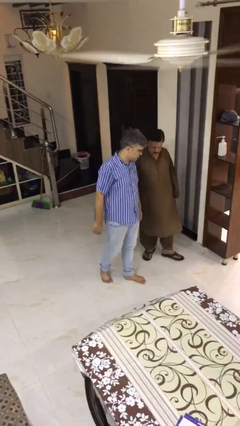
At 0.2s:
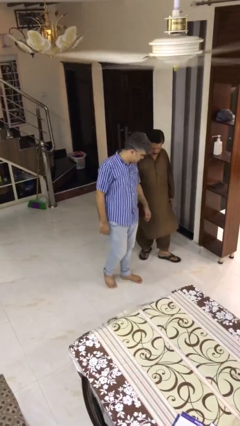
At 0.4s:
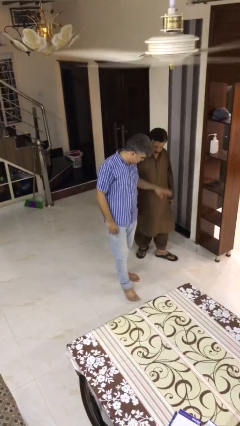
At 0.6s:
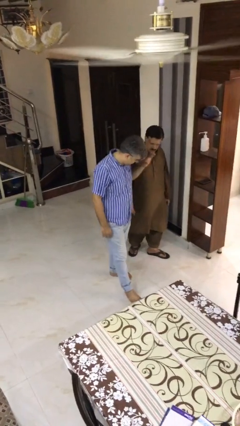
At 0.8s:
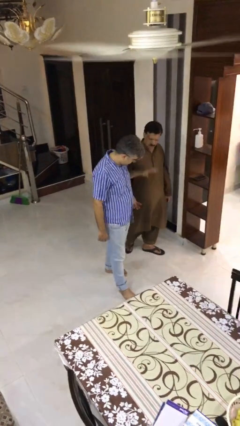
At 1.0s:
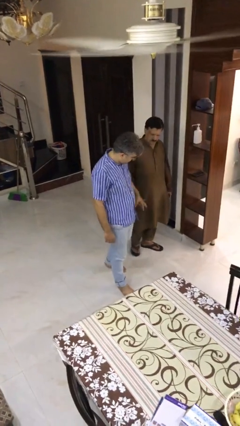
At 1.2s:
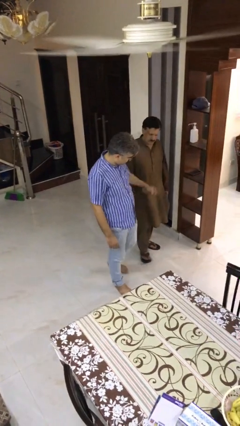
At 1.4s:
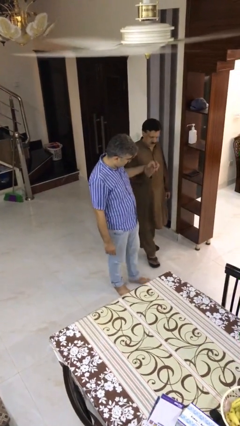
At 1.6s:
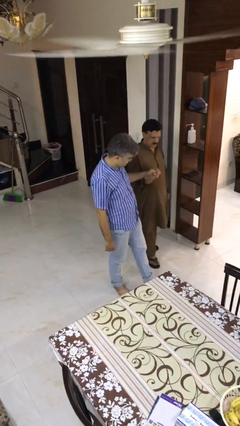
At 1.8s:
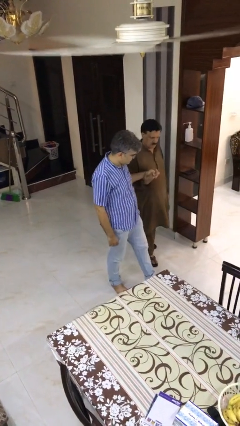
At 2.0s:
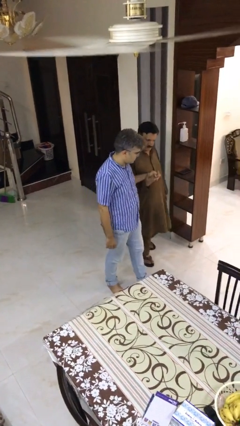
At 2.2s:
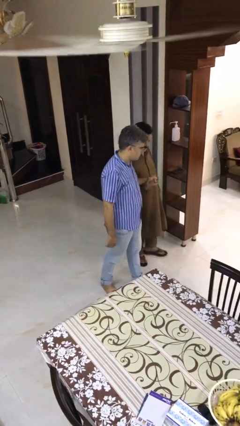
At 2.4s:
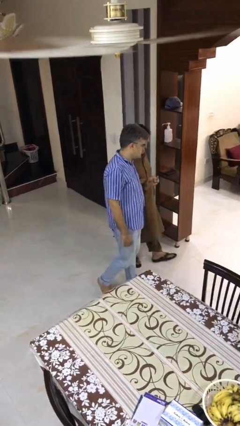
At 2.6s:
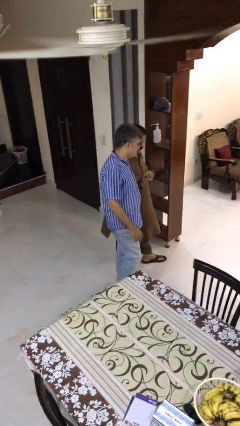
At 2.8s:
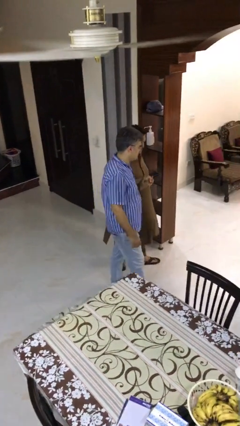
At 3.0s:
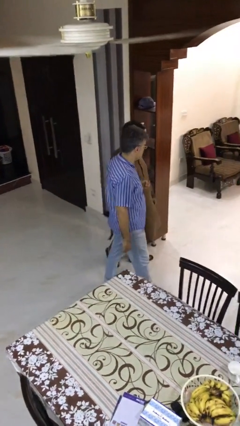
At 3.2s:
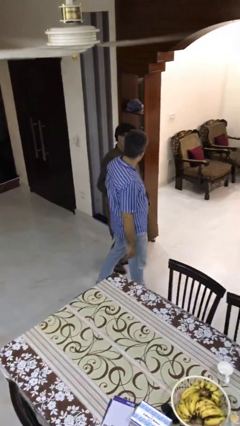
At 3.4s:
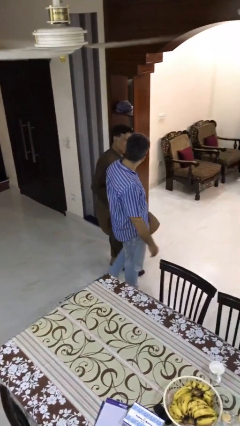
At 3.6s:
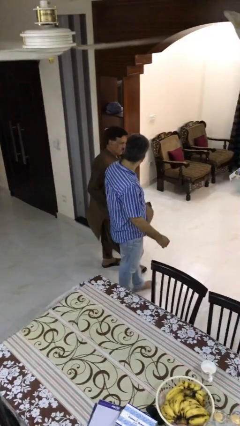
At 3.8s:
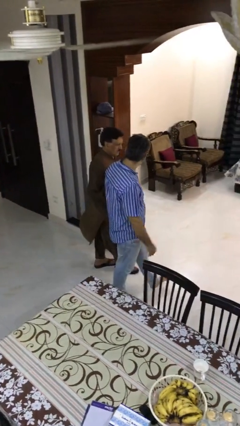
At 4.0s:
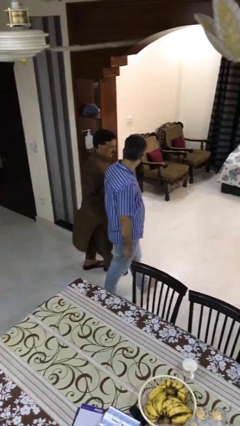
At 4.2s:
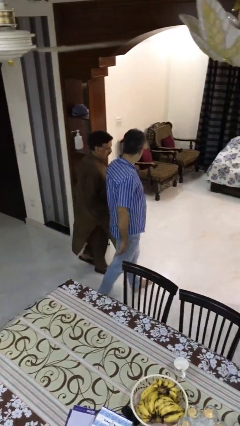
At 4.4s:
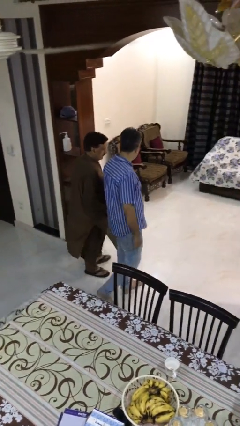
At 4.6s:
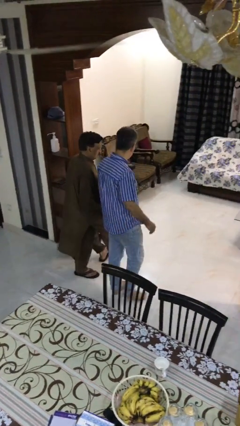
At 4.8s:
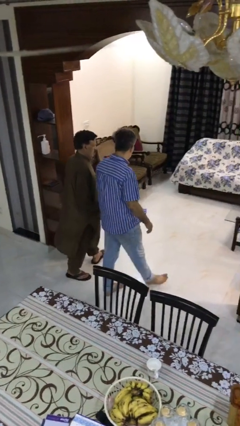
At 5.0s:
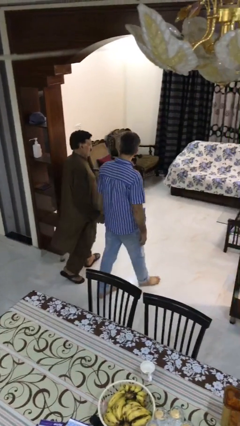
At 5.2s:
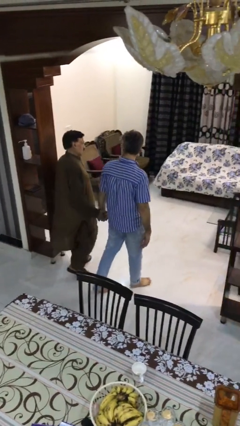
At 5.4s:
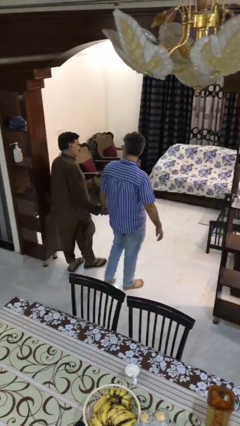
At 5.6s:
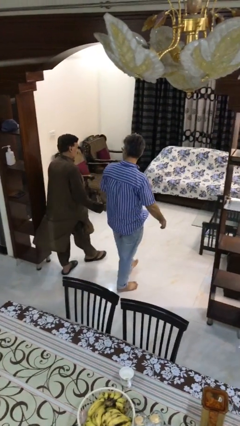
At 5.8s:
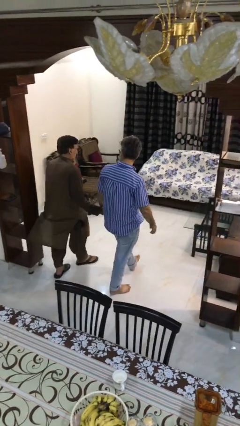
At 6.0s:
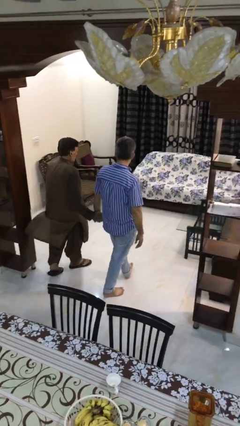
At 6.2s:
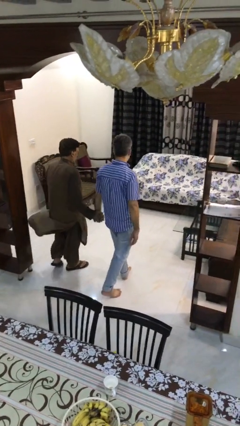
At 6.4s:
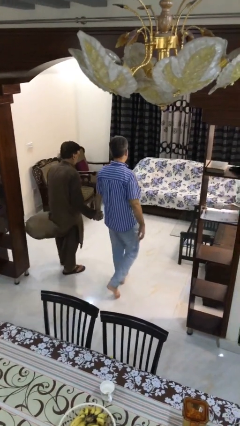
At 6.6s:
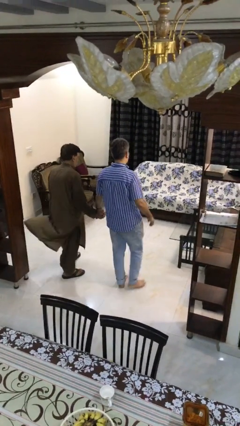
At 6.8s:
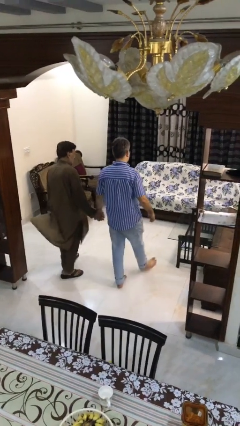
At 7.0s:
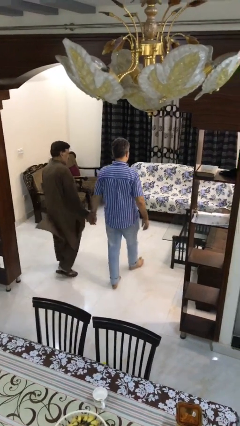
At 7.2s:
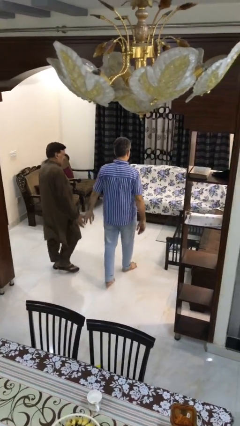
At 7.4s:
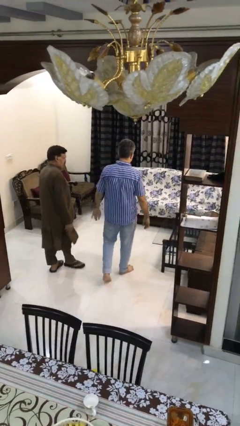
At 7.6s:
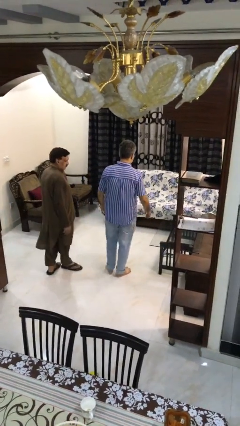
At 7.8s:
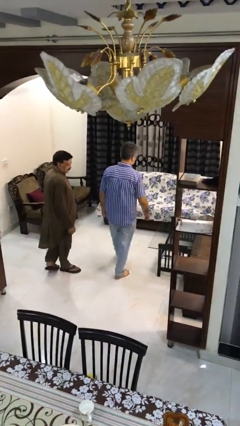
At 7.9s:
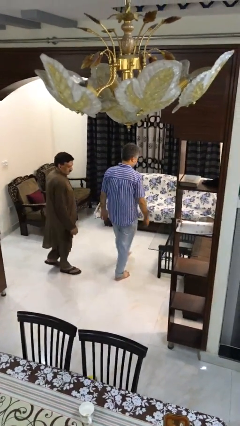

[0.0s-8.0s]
person holds hand

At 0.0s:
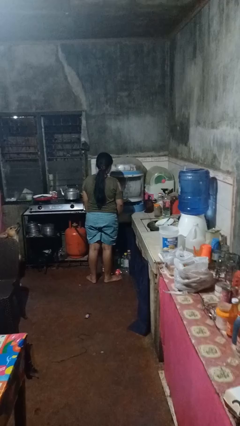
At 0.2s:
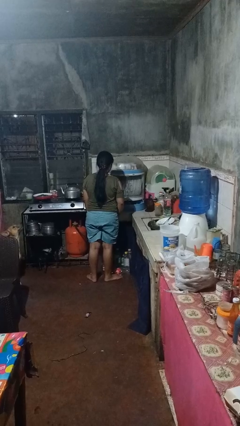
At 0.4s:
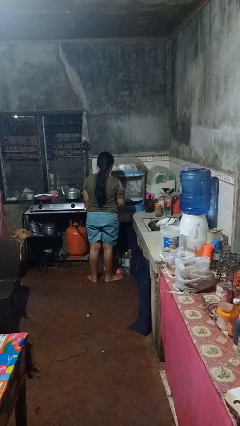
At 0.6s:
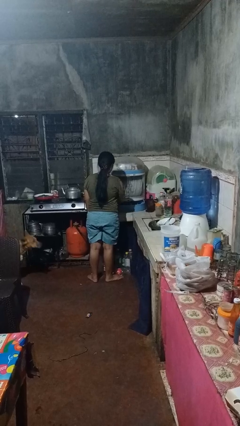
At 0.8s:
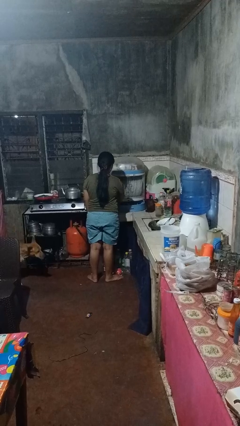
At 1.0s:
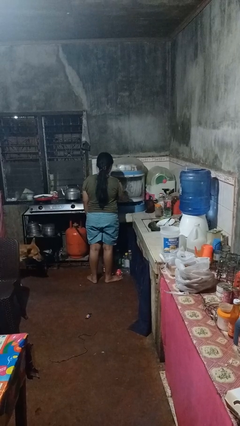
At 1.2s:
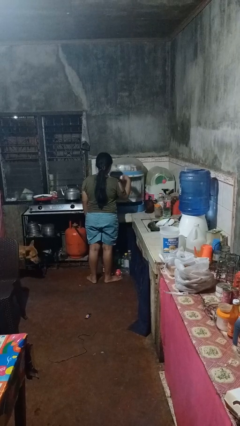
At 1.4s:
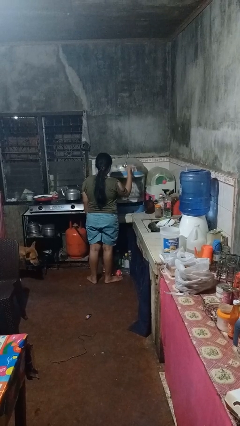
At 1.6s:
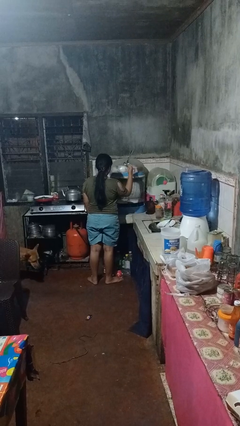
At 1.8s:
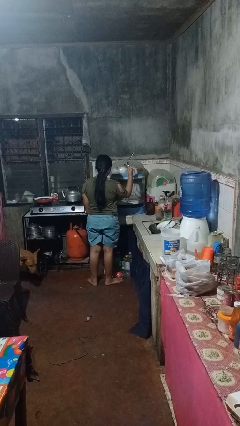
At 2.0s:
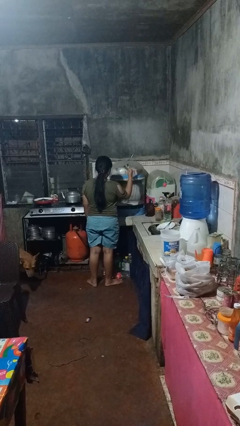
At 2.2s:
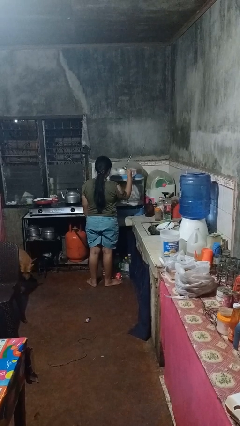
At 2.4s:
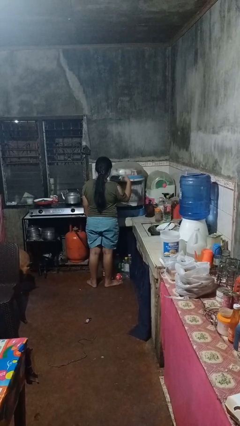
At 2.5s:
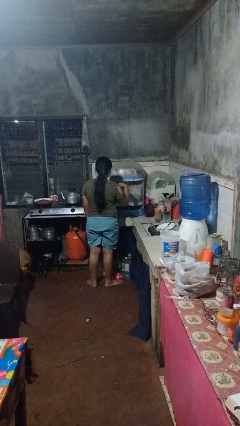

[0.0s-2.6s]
person takes object from kitchen drawer

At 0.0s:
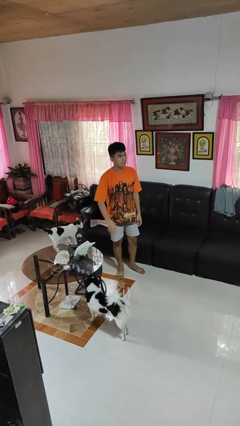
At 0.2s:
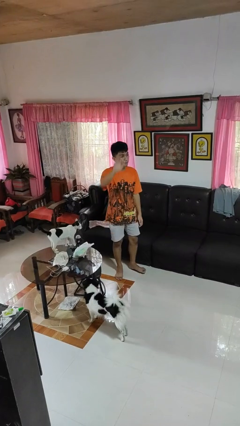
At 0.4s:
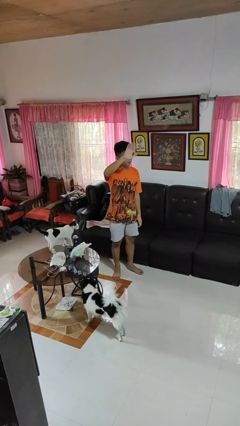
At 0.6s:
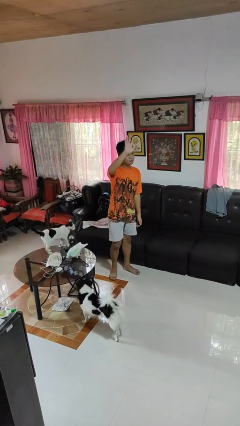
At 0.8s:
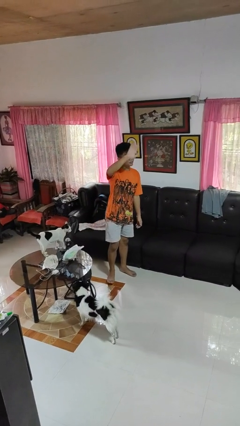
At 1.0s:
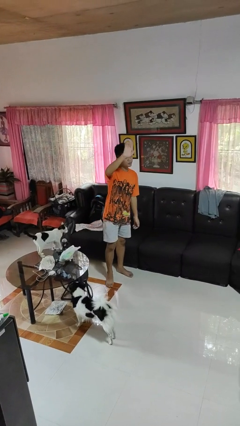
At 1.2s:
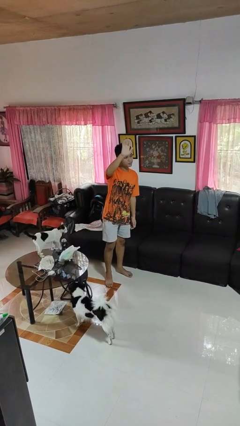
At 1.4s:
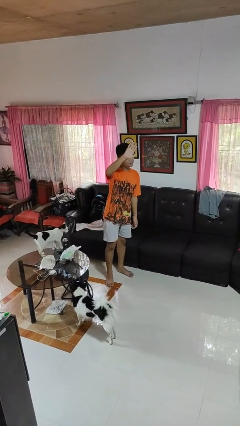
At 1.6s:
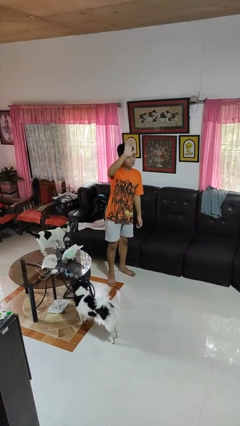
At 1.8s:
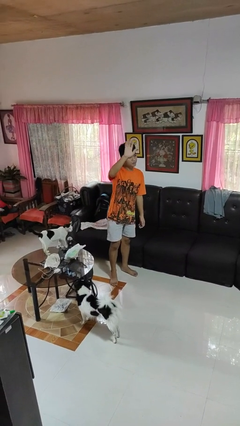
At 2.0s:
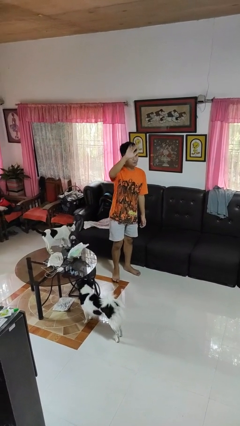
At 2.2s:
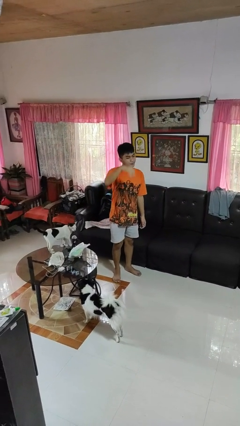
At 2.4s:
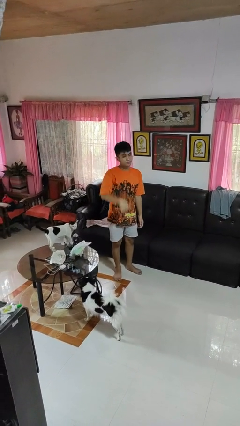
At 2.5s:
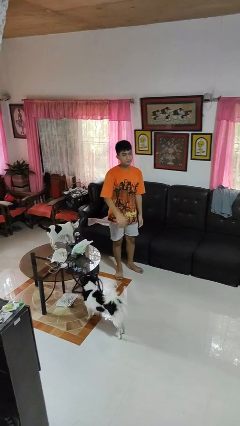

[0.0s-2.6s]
person waves at person

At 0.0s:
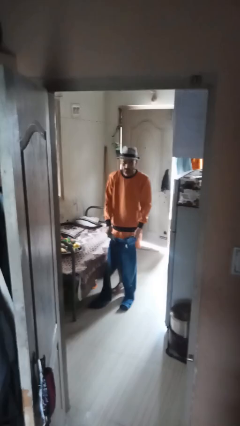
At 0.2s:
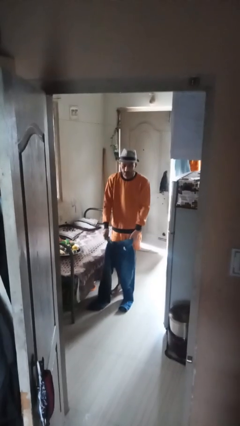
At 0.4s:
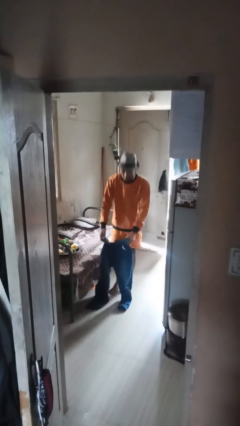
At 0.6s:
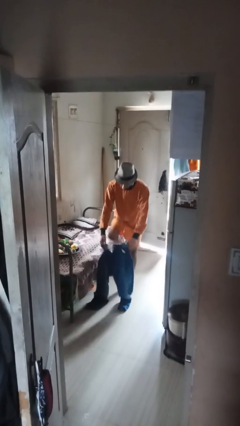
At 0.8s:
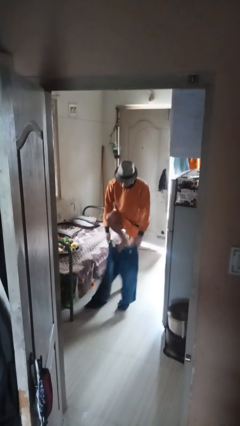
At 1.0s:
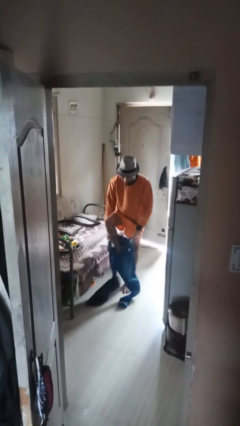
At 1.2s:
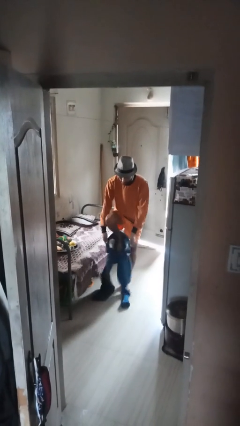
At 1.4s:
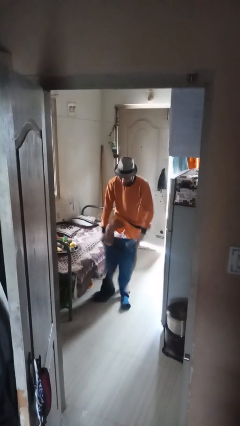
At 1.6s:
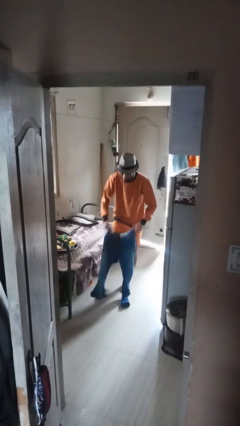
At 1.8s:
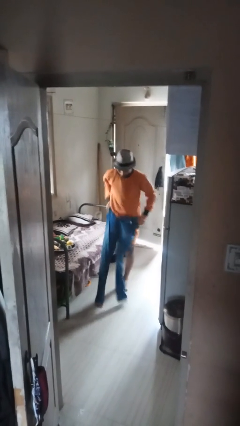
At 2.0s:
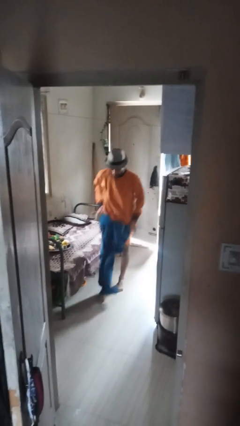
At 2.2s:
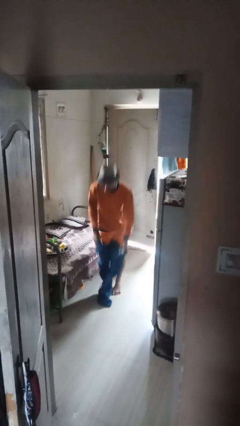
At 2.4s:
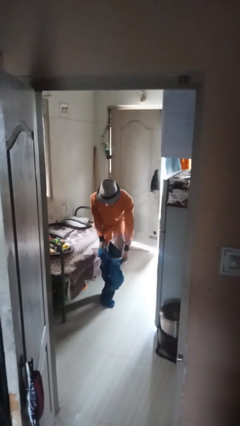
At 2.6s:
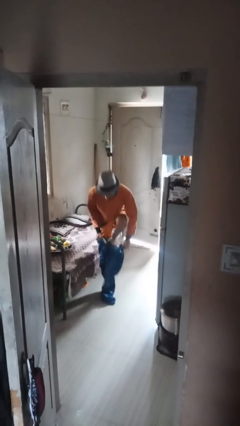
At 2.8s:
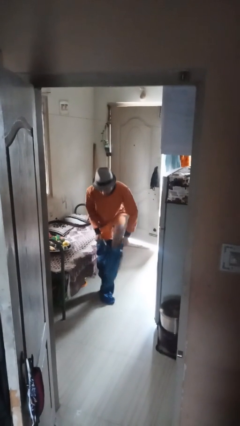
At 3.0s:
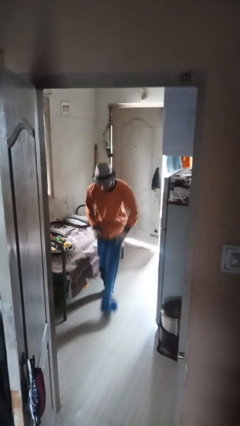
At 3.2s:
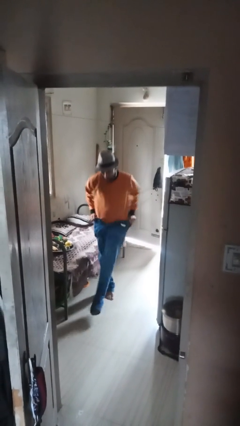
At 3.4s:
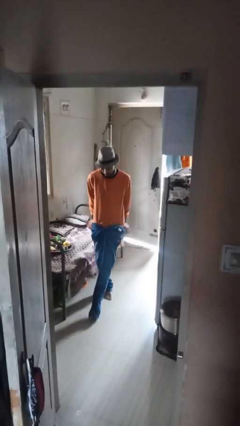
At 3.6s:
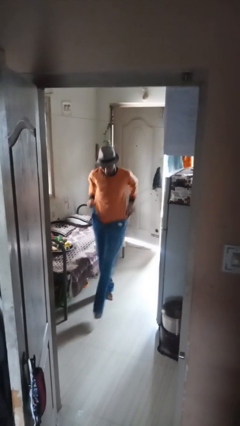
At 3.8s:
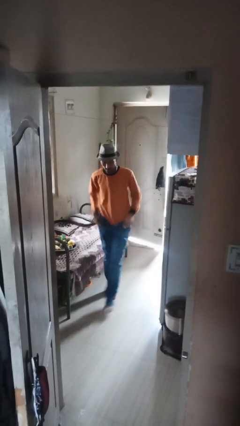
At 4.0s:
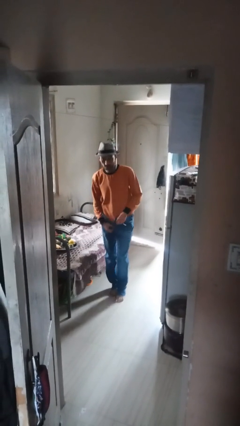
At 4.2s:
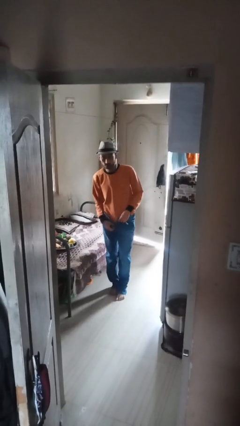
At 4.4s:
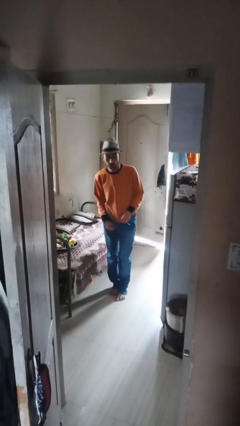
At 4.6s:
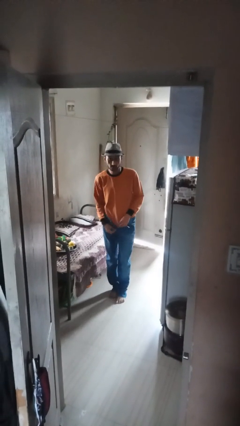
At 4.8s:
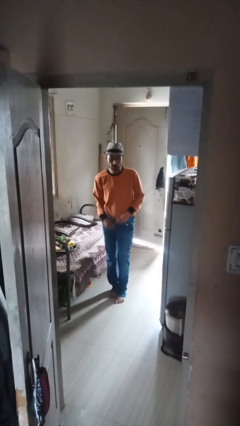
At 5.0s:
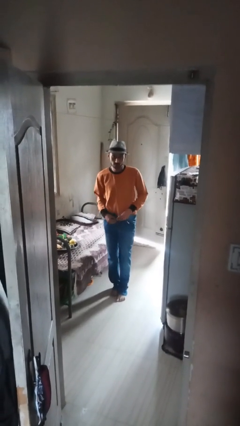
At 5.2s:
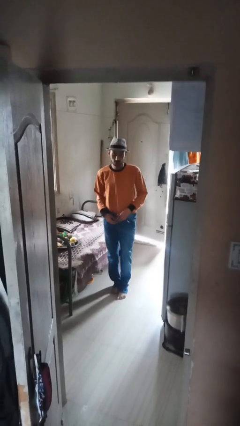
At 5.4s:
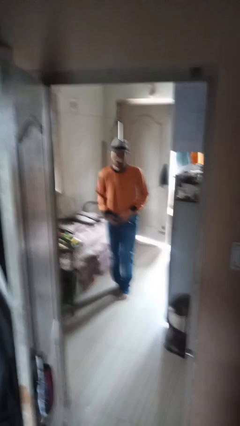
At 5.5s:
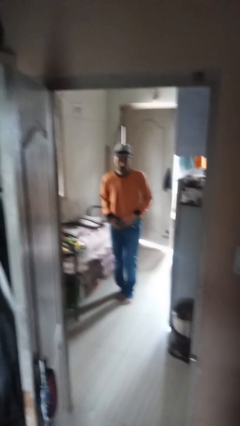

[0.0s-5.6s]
person puts on pants
